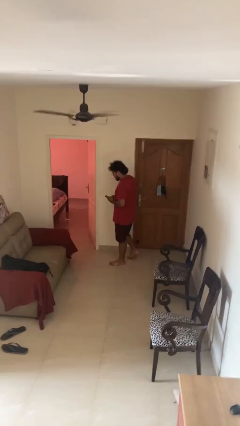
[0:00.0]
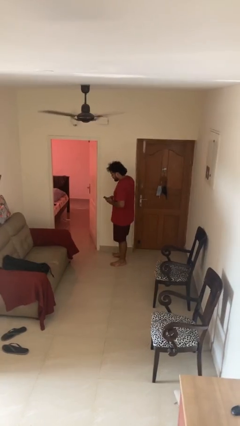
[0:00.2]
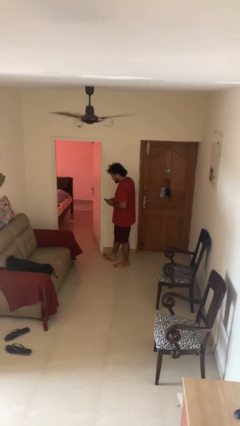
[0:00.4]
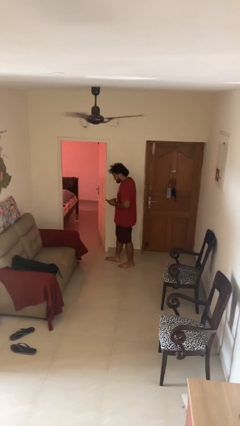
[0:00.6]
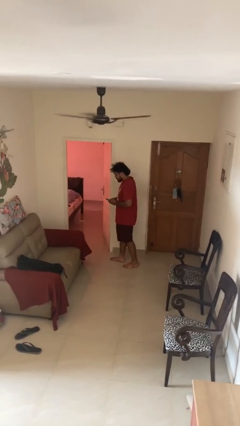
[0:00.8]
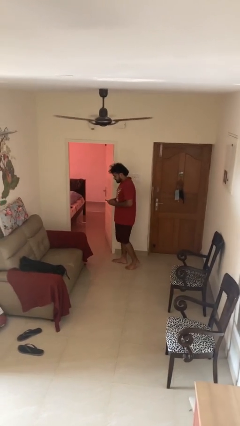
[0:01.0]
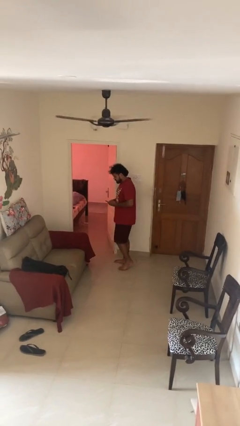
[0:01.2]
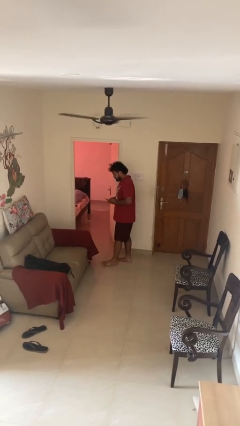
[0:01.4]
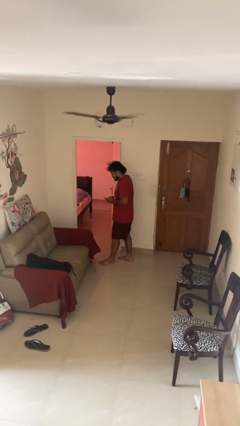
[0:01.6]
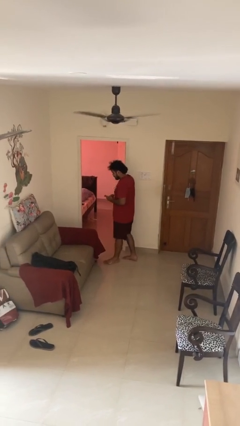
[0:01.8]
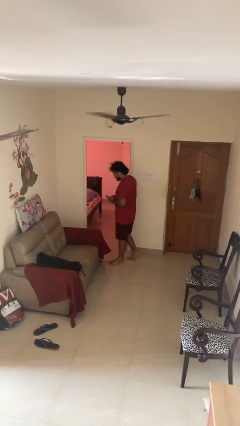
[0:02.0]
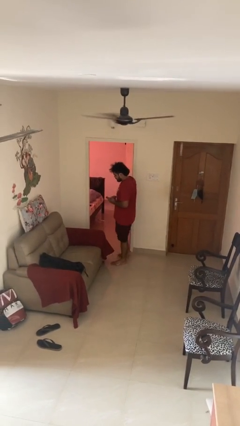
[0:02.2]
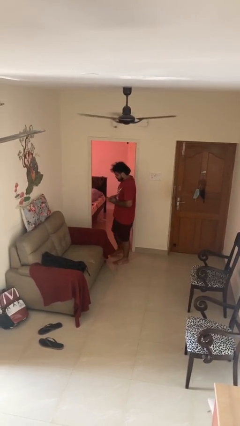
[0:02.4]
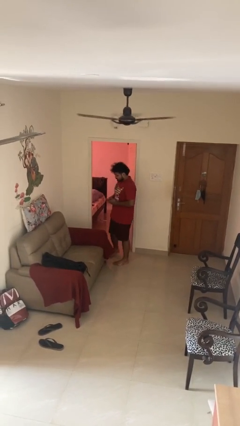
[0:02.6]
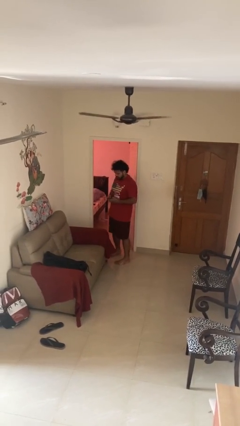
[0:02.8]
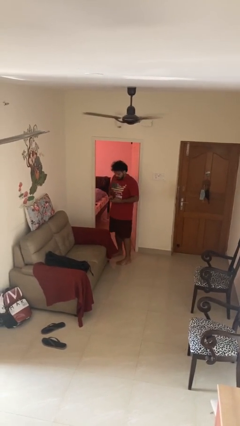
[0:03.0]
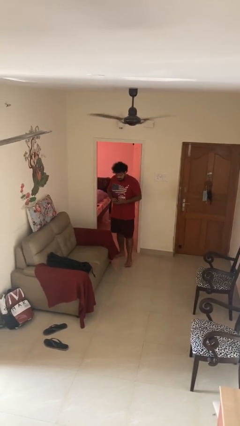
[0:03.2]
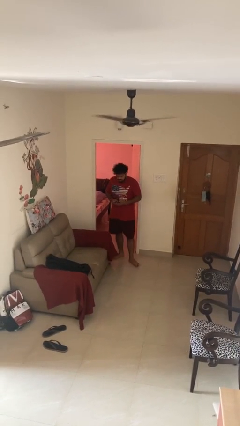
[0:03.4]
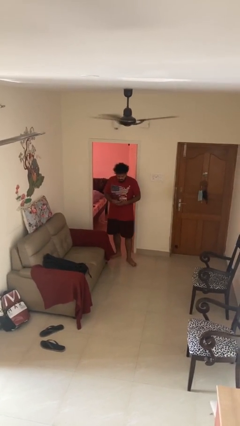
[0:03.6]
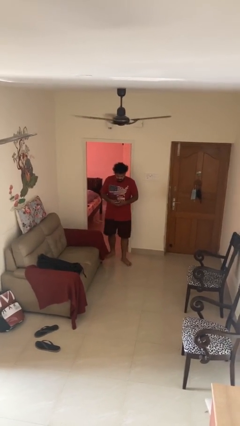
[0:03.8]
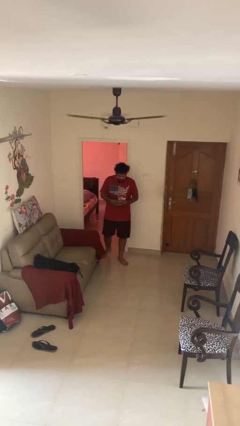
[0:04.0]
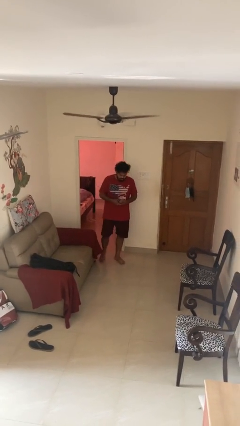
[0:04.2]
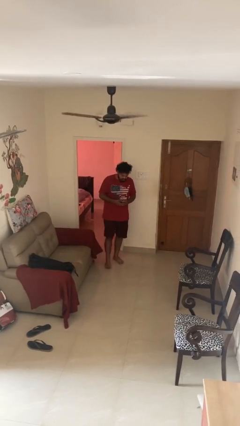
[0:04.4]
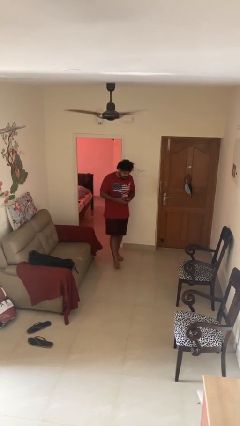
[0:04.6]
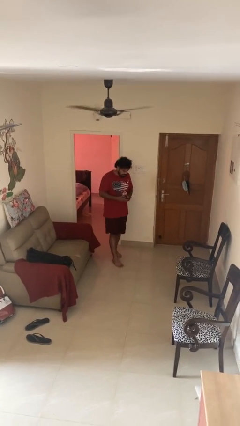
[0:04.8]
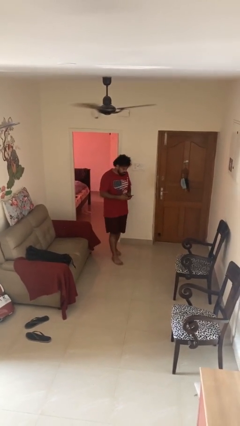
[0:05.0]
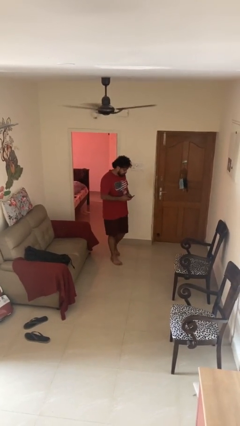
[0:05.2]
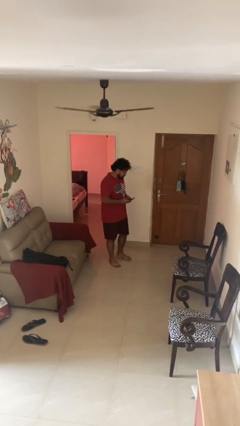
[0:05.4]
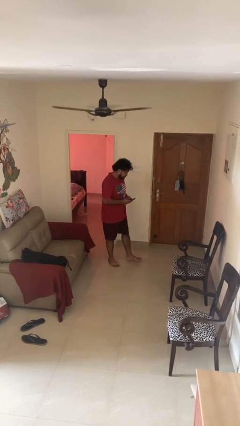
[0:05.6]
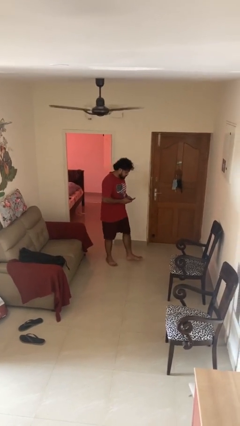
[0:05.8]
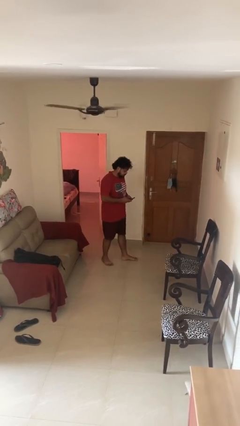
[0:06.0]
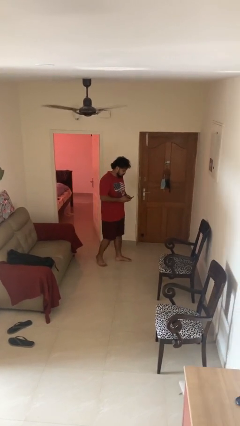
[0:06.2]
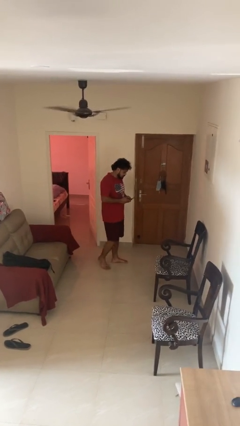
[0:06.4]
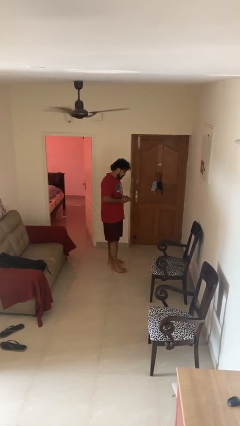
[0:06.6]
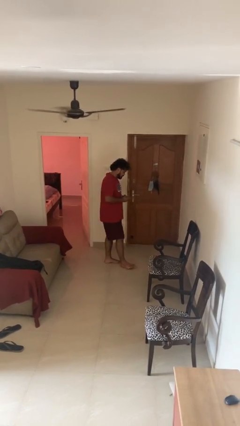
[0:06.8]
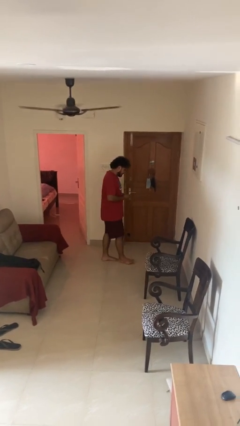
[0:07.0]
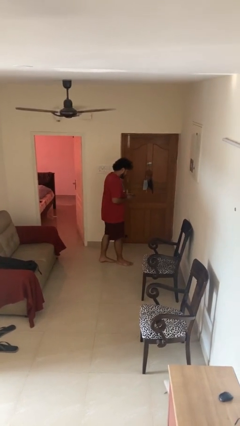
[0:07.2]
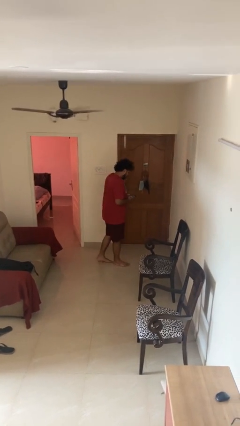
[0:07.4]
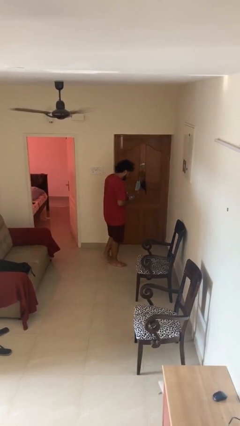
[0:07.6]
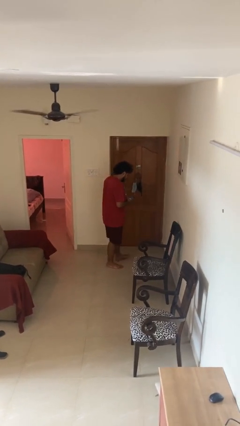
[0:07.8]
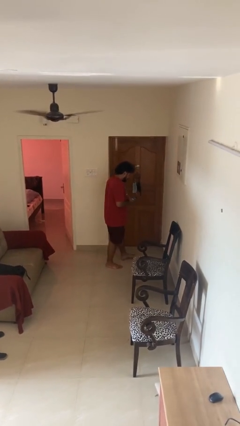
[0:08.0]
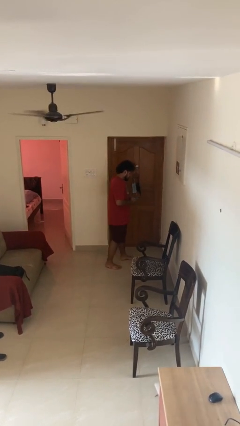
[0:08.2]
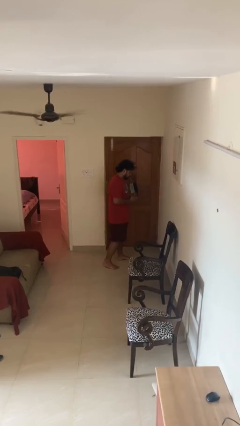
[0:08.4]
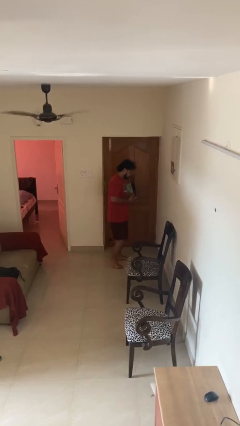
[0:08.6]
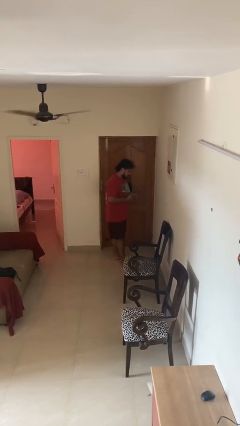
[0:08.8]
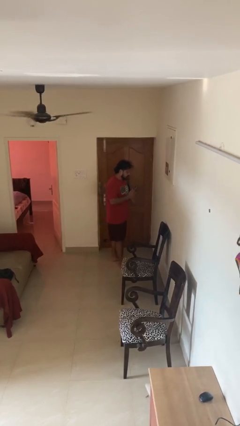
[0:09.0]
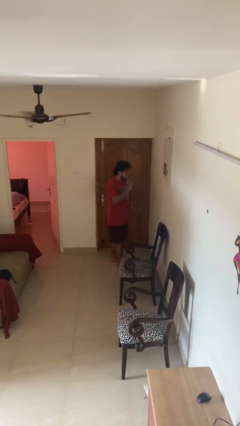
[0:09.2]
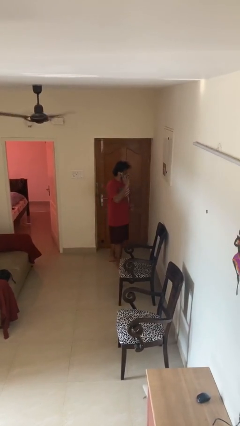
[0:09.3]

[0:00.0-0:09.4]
person texts on phone

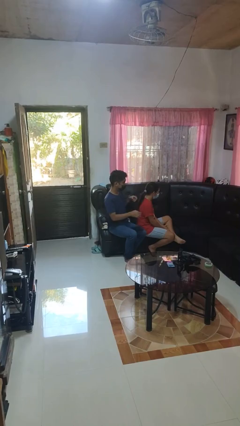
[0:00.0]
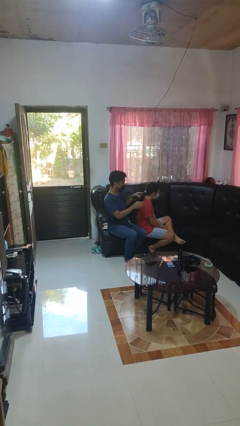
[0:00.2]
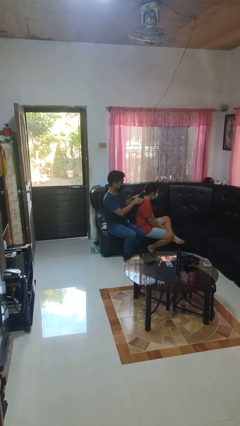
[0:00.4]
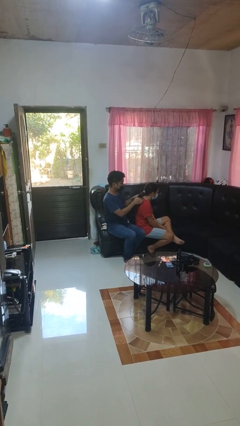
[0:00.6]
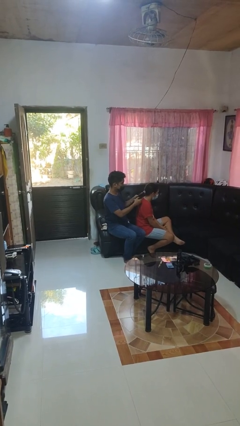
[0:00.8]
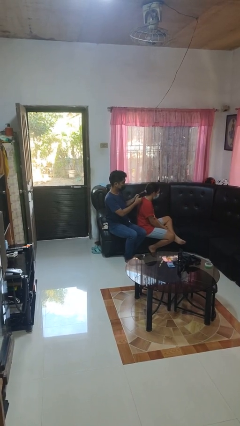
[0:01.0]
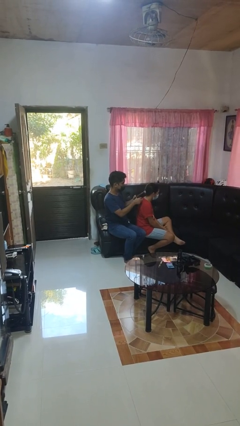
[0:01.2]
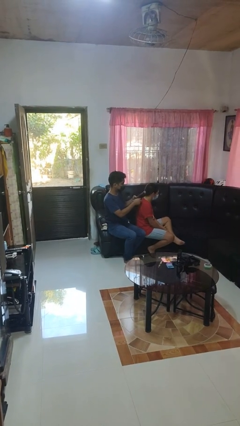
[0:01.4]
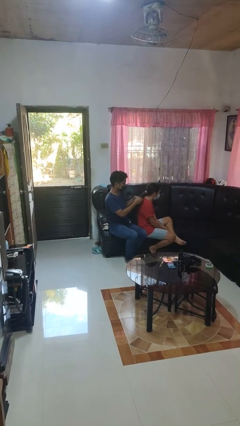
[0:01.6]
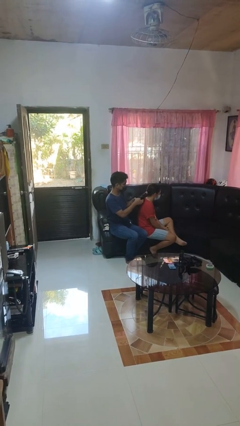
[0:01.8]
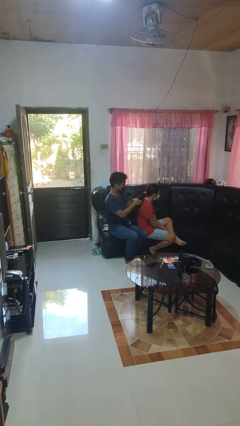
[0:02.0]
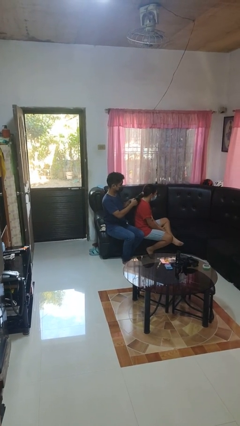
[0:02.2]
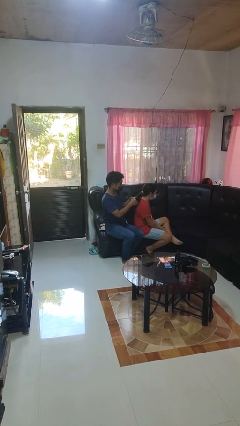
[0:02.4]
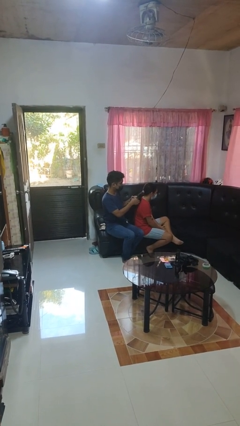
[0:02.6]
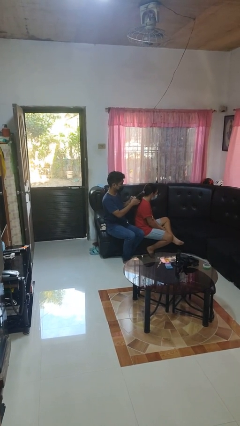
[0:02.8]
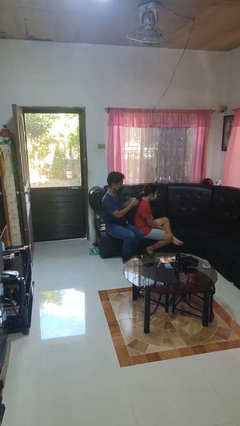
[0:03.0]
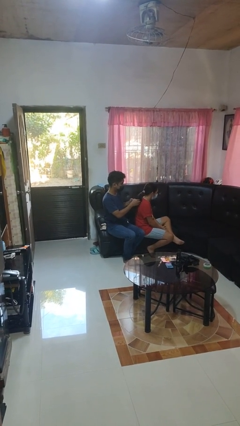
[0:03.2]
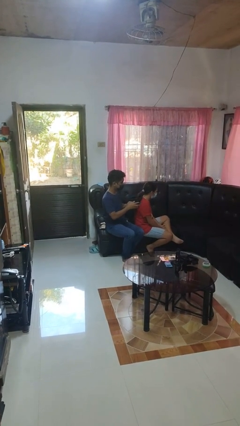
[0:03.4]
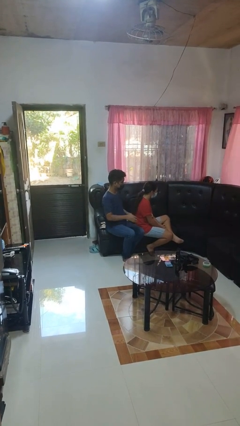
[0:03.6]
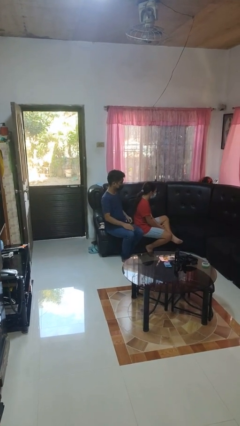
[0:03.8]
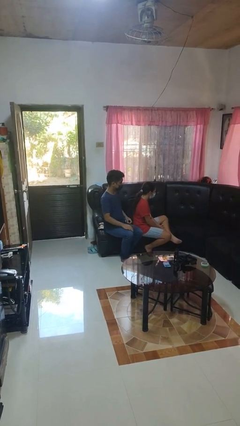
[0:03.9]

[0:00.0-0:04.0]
person braids hair of person

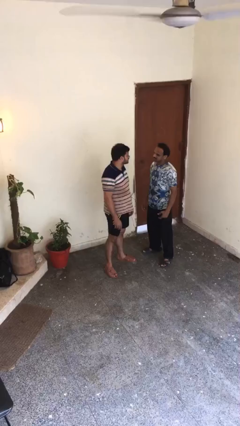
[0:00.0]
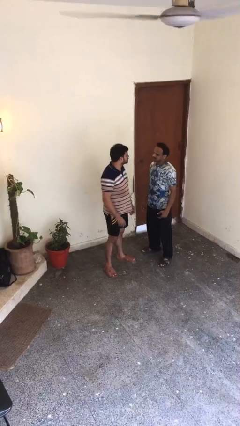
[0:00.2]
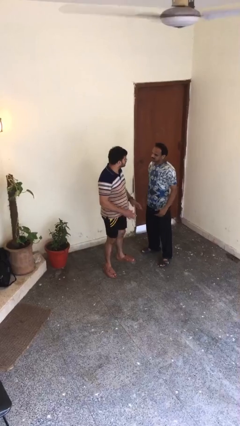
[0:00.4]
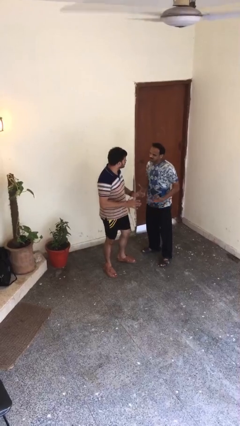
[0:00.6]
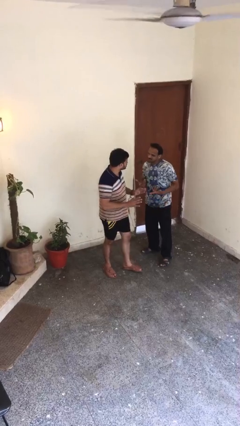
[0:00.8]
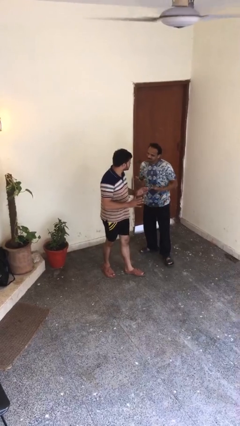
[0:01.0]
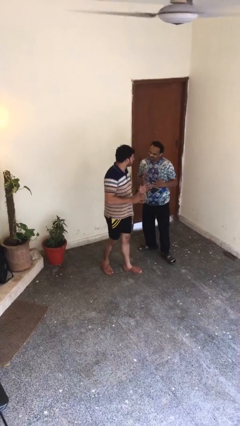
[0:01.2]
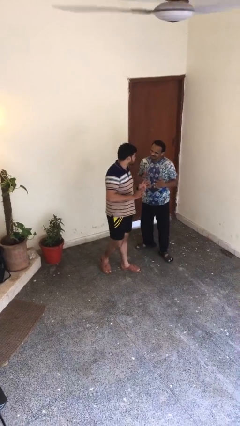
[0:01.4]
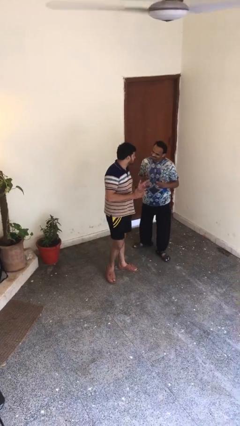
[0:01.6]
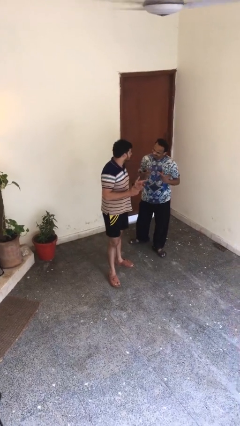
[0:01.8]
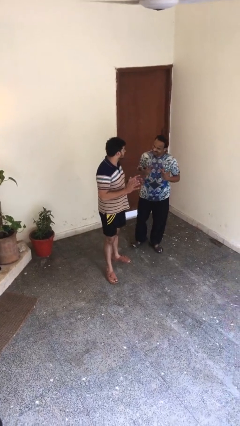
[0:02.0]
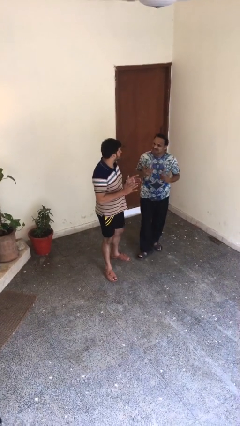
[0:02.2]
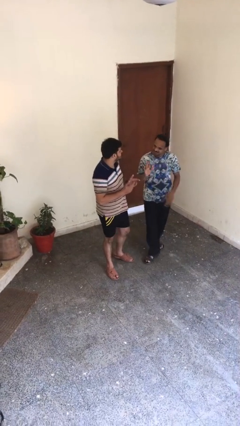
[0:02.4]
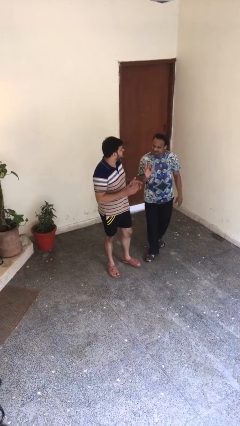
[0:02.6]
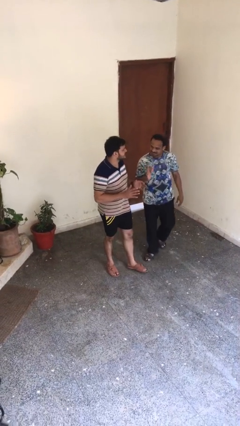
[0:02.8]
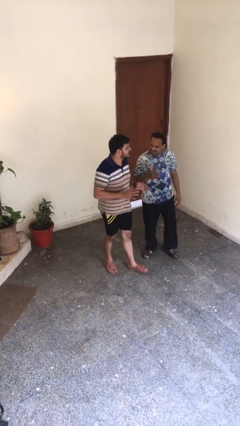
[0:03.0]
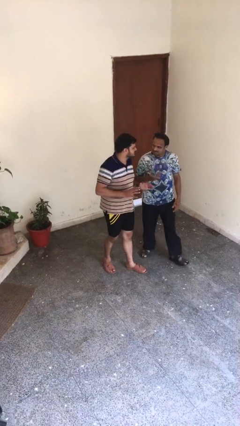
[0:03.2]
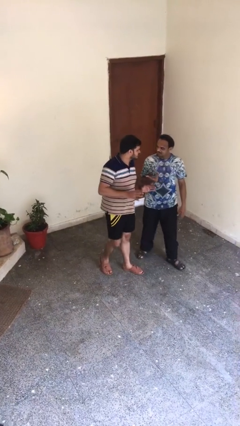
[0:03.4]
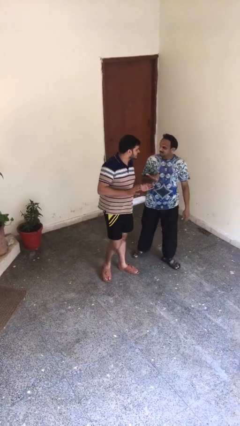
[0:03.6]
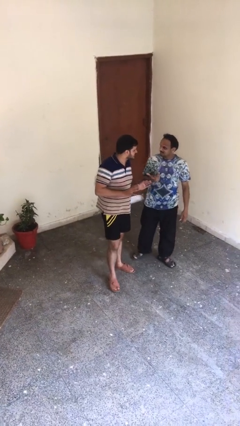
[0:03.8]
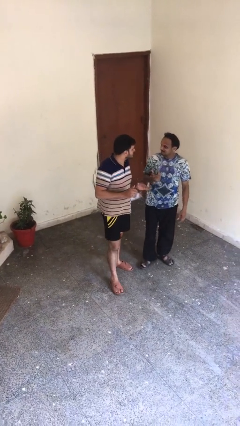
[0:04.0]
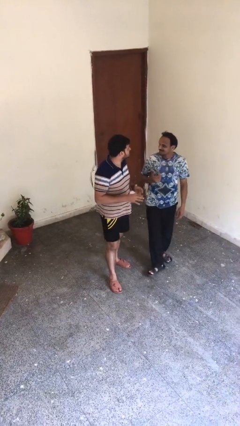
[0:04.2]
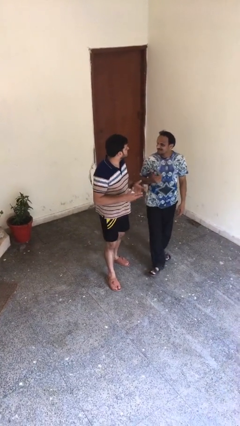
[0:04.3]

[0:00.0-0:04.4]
person talks to person
